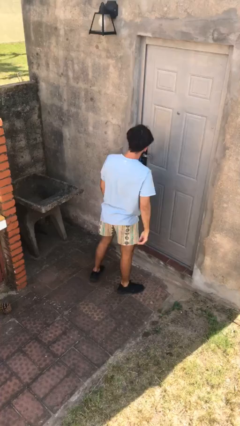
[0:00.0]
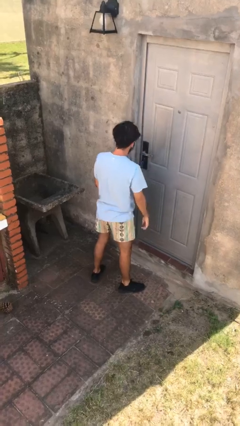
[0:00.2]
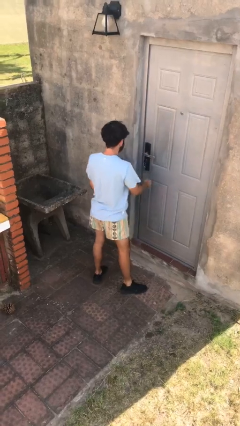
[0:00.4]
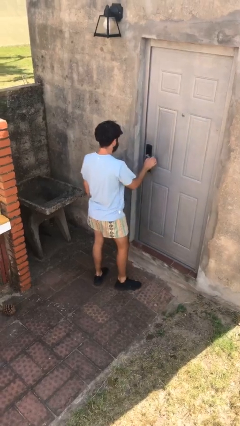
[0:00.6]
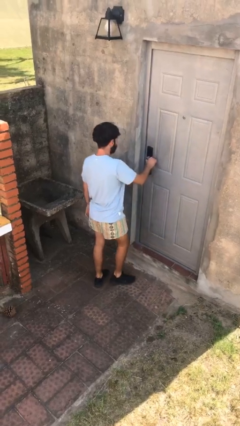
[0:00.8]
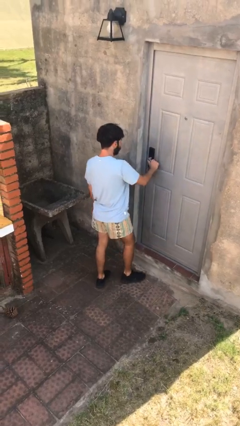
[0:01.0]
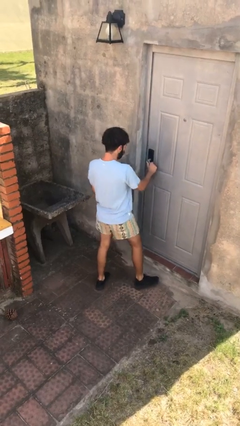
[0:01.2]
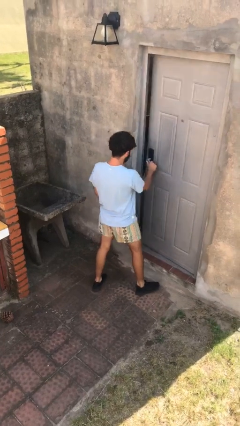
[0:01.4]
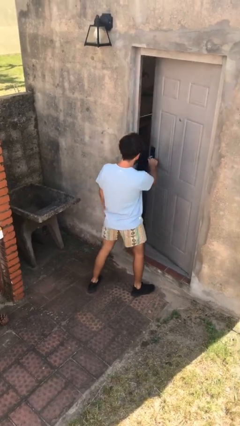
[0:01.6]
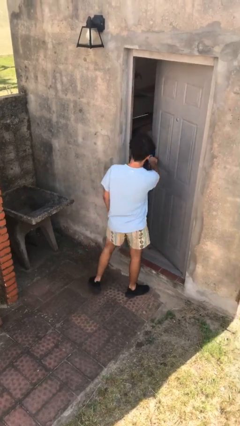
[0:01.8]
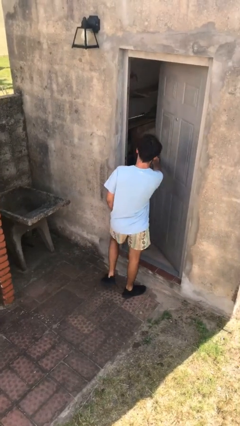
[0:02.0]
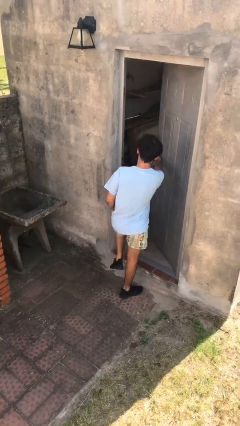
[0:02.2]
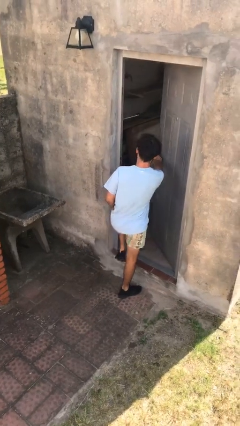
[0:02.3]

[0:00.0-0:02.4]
person opens facility door

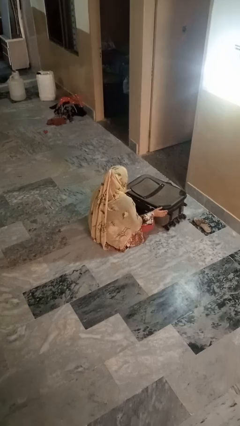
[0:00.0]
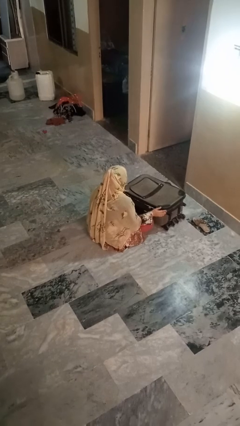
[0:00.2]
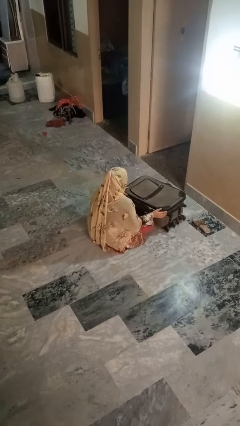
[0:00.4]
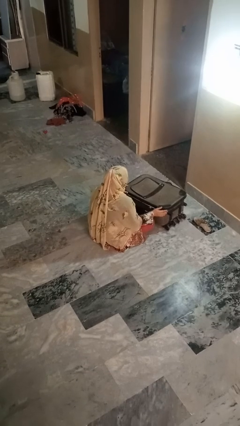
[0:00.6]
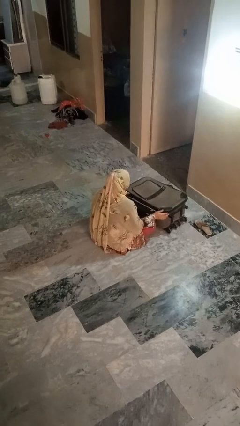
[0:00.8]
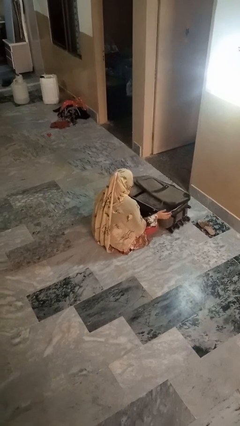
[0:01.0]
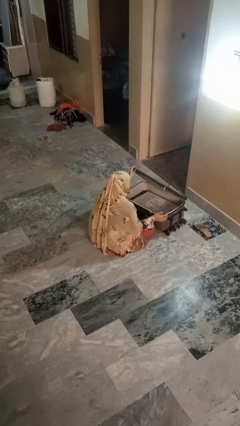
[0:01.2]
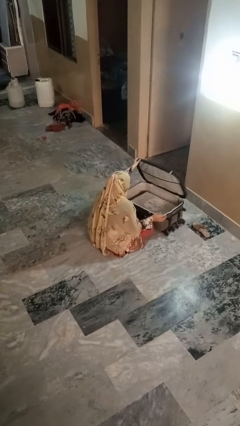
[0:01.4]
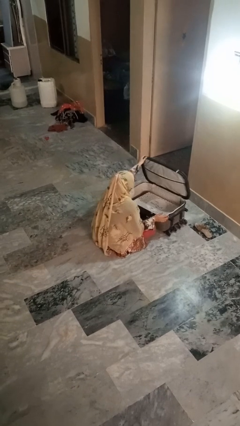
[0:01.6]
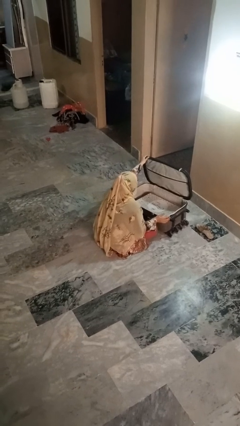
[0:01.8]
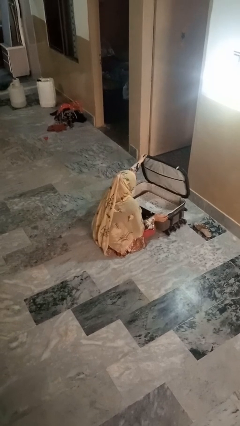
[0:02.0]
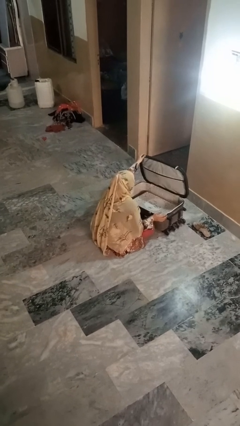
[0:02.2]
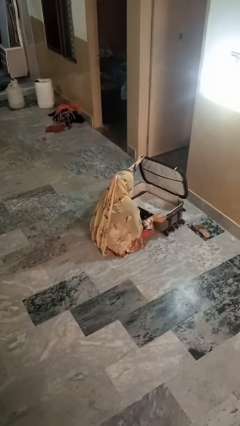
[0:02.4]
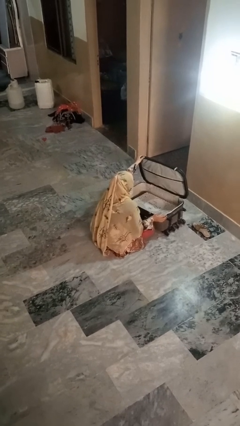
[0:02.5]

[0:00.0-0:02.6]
person opens suitcase

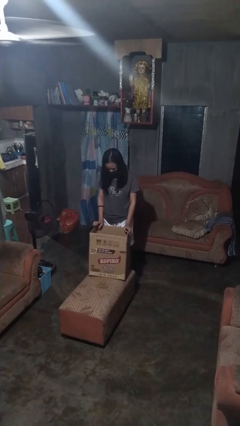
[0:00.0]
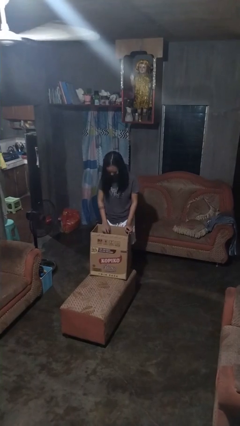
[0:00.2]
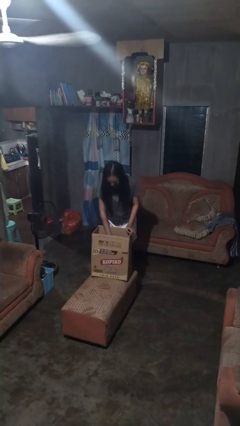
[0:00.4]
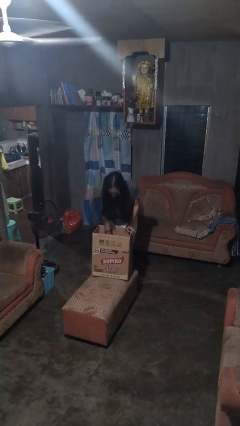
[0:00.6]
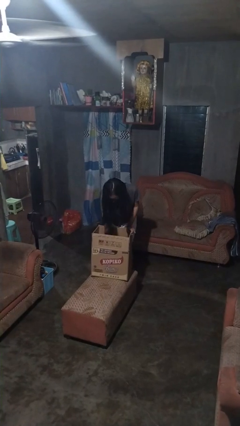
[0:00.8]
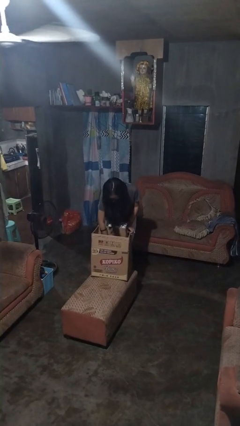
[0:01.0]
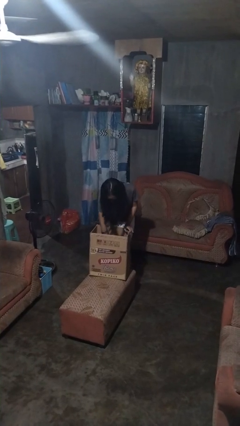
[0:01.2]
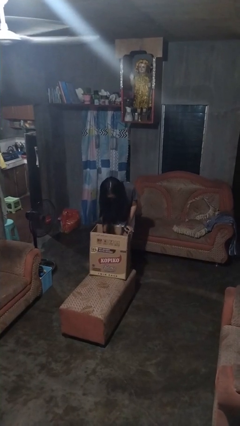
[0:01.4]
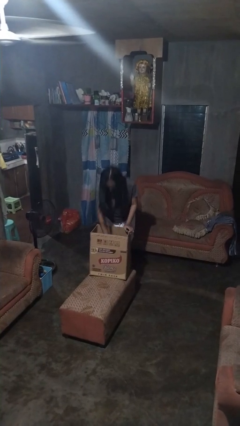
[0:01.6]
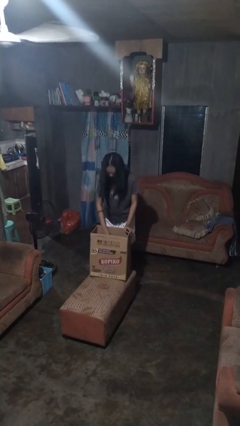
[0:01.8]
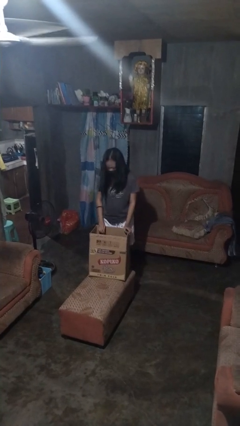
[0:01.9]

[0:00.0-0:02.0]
person searches in box

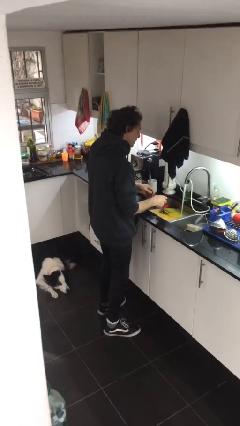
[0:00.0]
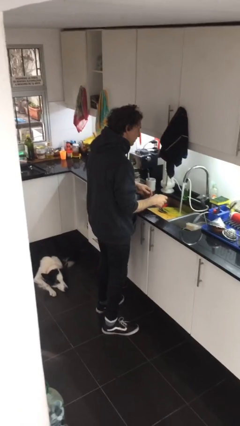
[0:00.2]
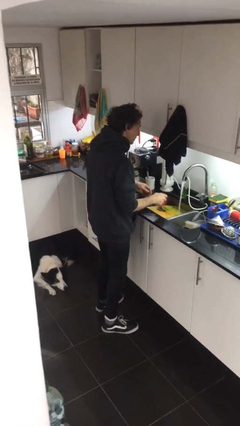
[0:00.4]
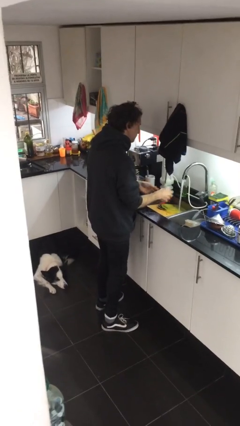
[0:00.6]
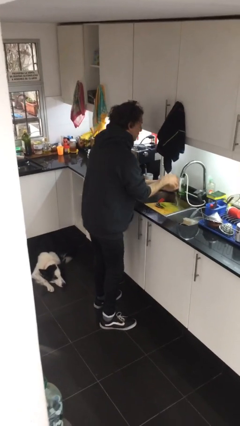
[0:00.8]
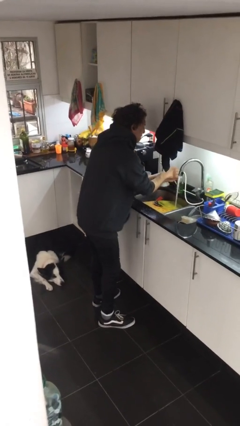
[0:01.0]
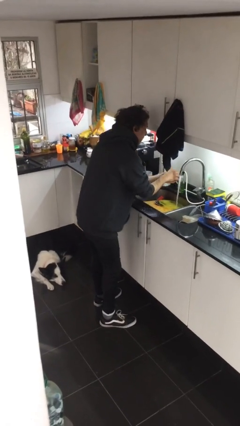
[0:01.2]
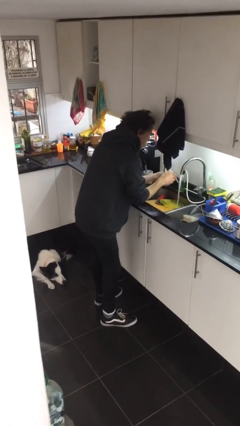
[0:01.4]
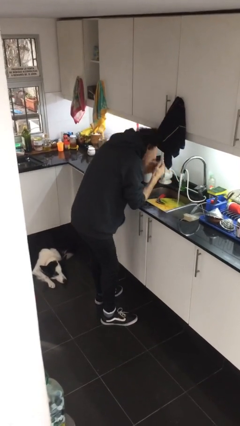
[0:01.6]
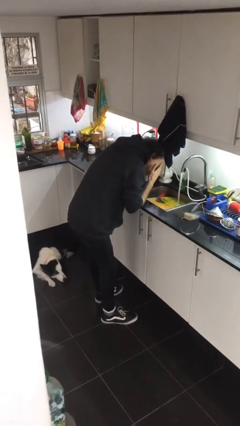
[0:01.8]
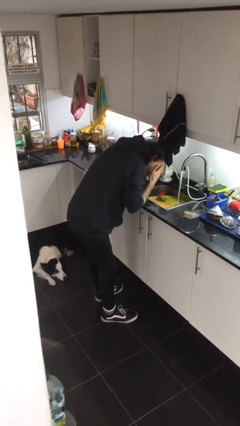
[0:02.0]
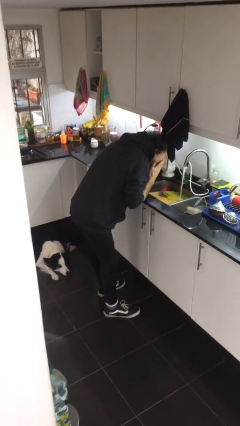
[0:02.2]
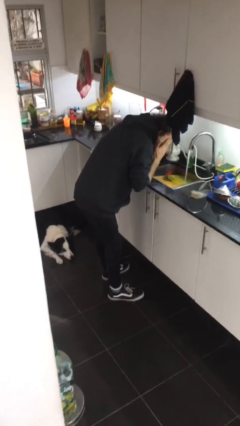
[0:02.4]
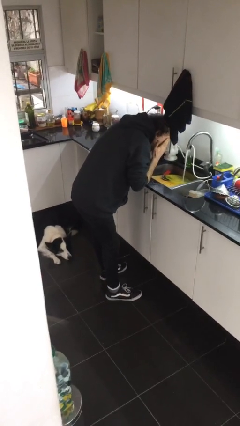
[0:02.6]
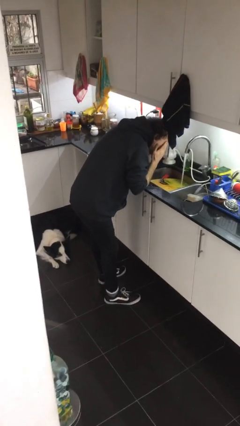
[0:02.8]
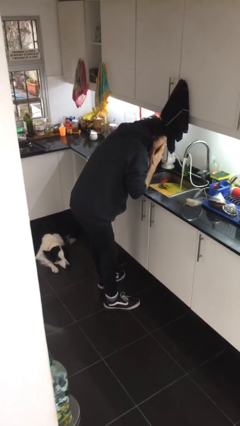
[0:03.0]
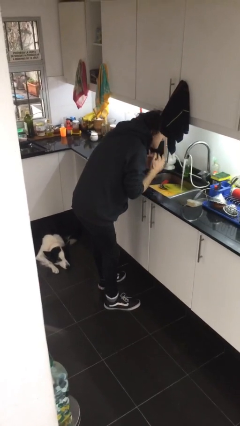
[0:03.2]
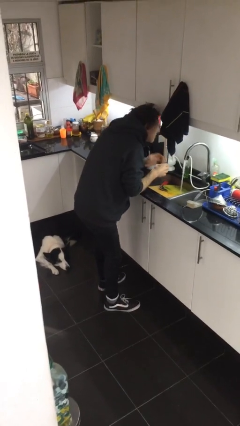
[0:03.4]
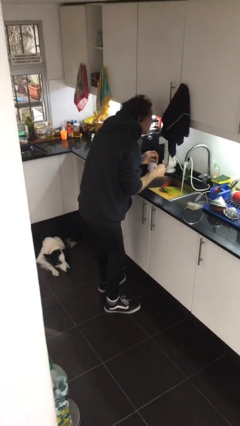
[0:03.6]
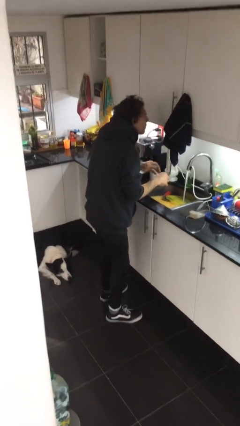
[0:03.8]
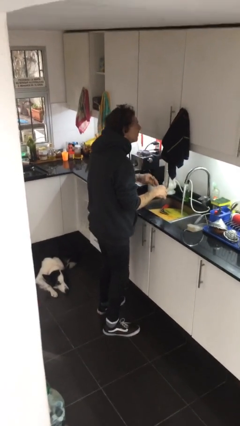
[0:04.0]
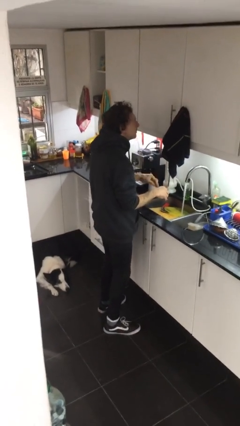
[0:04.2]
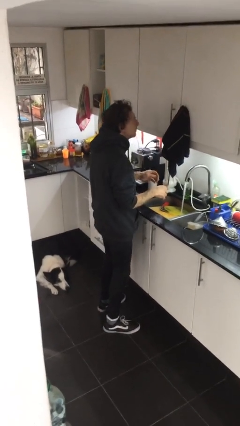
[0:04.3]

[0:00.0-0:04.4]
person washes face

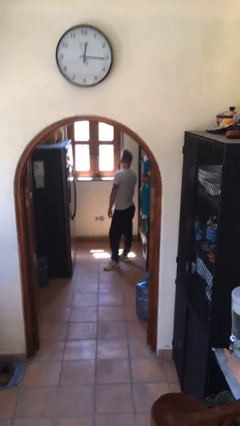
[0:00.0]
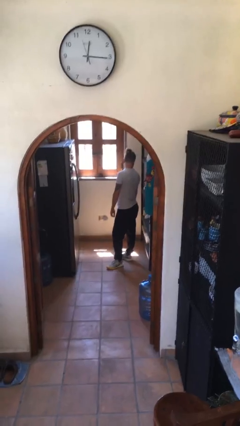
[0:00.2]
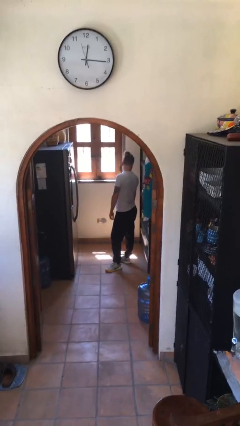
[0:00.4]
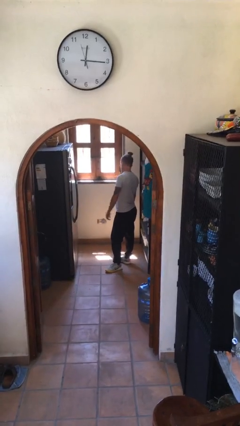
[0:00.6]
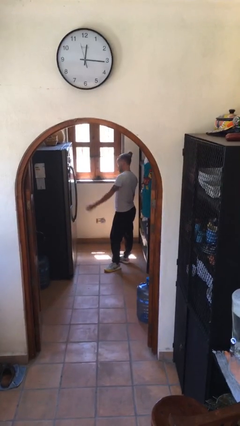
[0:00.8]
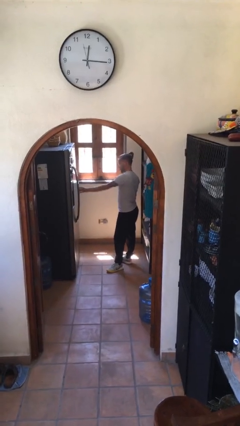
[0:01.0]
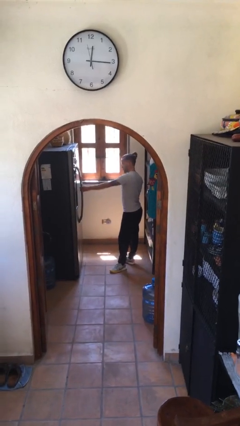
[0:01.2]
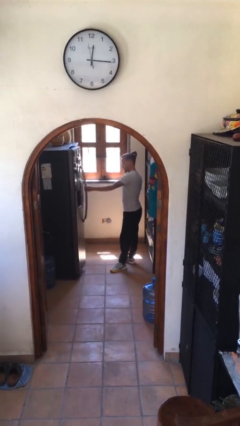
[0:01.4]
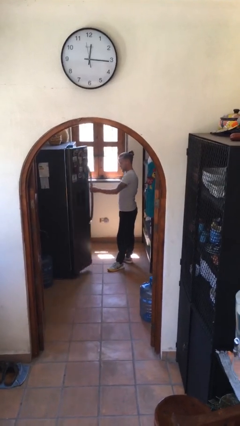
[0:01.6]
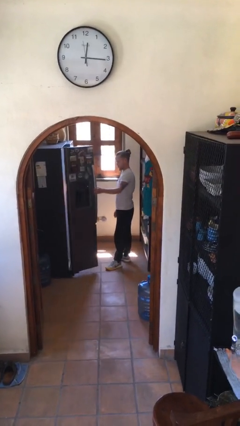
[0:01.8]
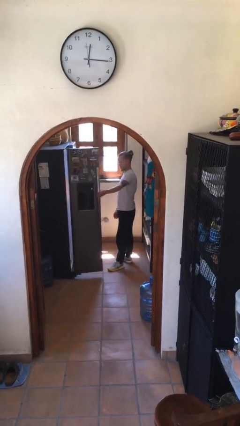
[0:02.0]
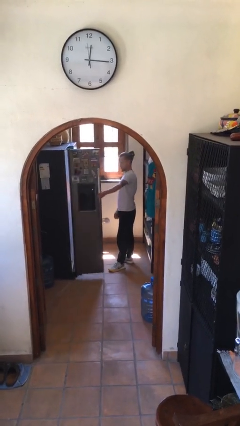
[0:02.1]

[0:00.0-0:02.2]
person opens refrigerator

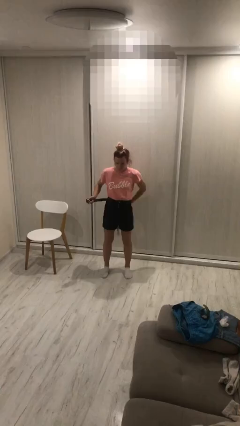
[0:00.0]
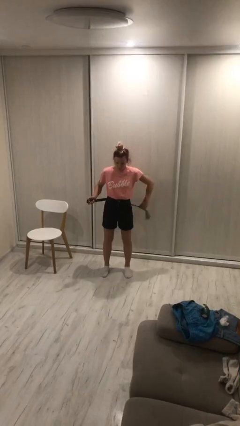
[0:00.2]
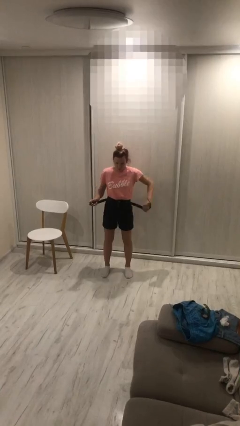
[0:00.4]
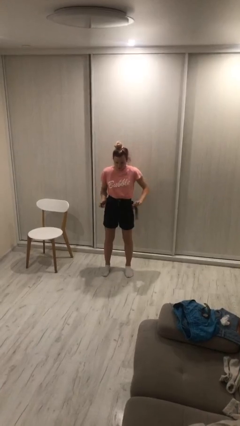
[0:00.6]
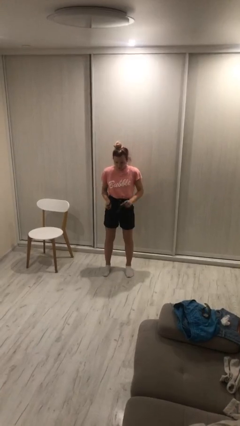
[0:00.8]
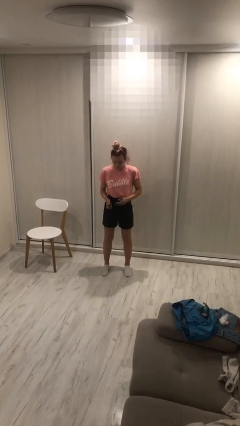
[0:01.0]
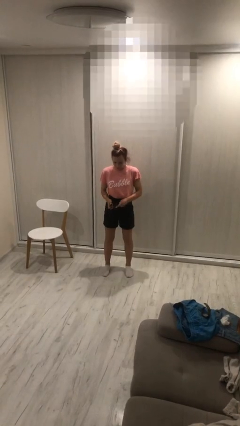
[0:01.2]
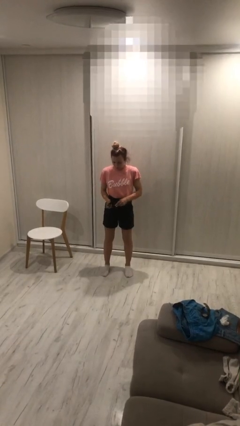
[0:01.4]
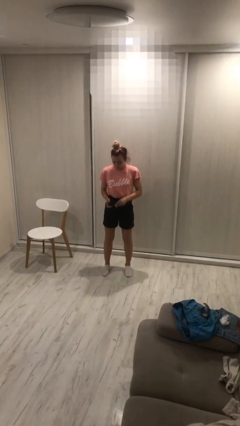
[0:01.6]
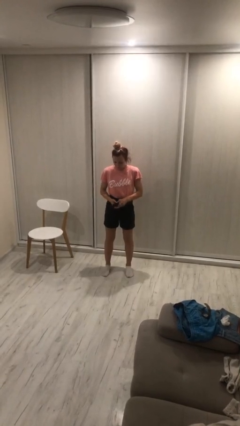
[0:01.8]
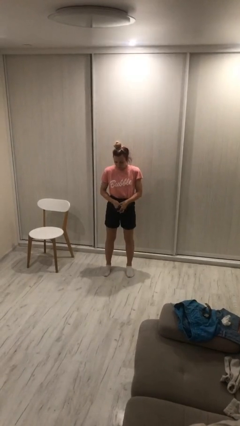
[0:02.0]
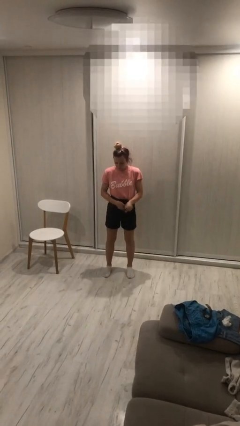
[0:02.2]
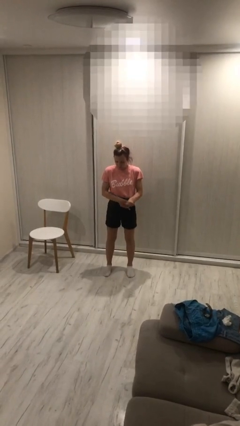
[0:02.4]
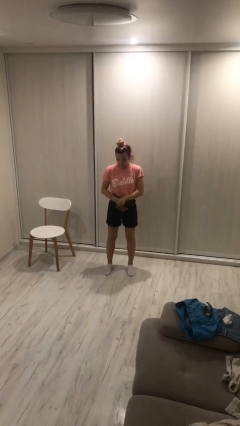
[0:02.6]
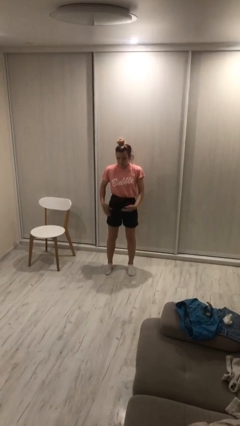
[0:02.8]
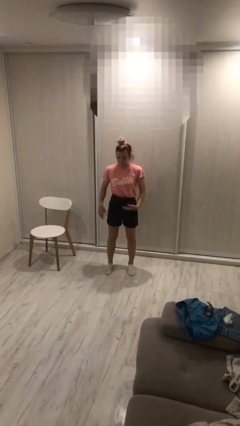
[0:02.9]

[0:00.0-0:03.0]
person puts on belt

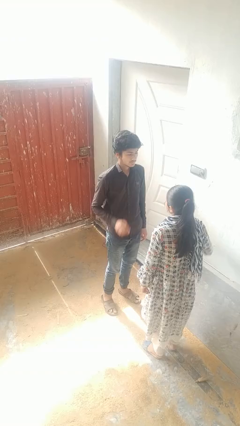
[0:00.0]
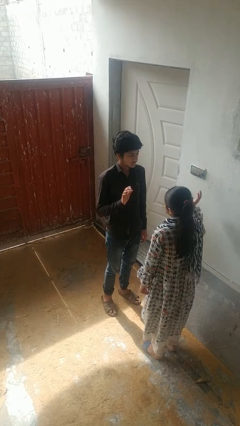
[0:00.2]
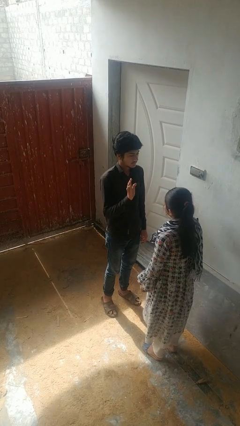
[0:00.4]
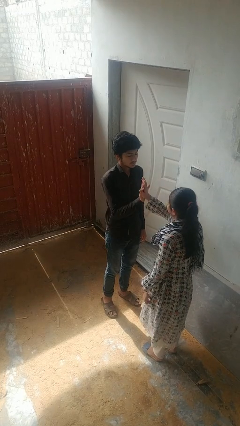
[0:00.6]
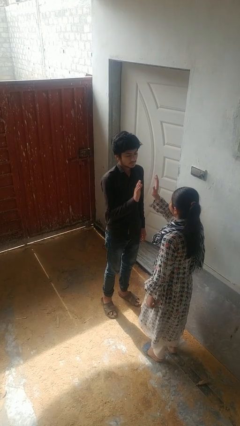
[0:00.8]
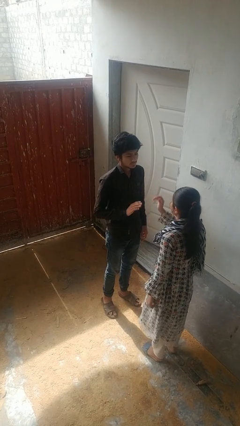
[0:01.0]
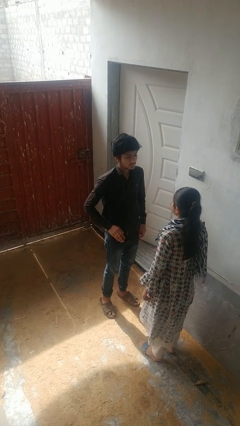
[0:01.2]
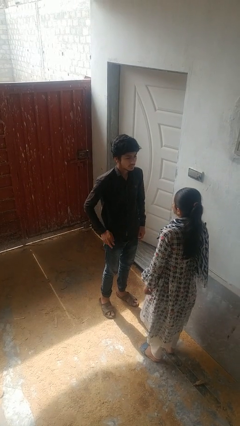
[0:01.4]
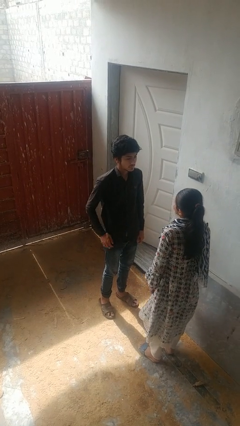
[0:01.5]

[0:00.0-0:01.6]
person highfives hand
